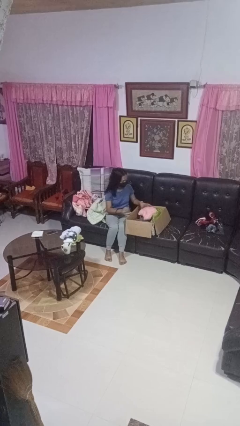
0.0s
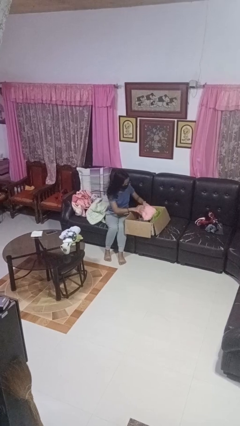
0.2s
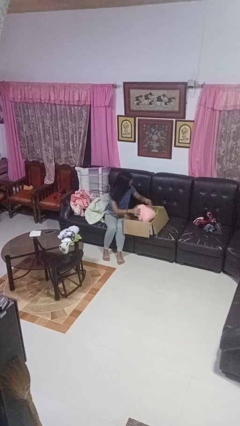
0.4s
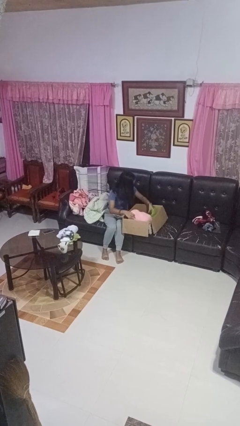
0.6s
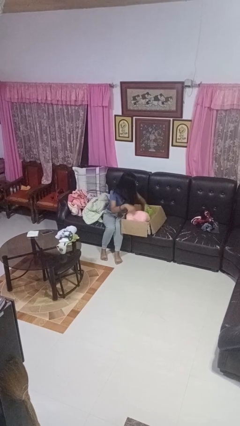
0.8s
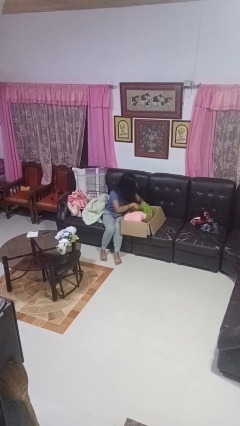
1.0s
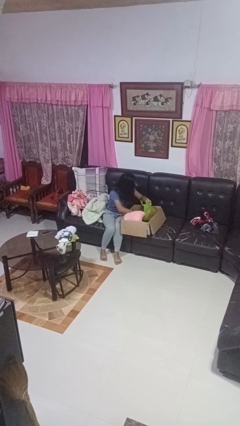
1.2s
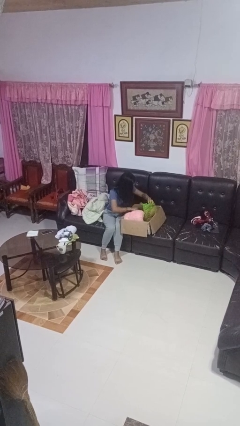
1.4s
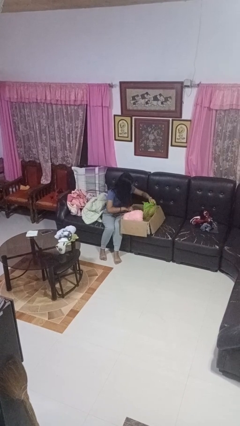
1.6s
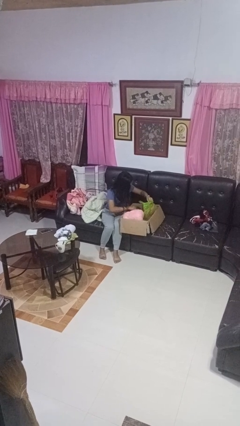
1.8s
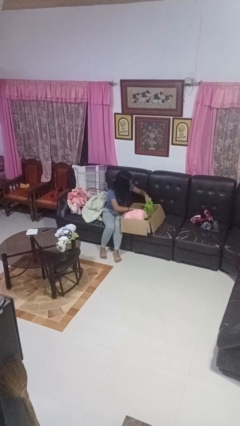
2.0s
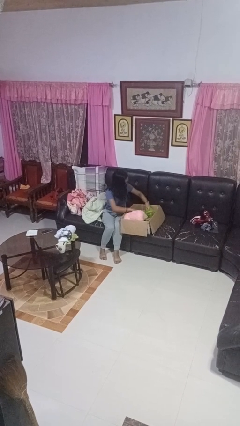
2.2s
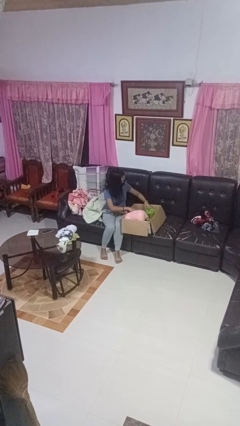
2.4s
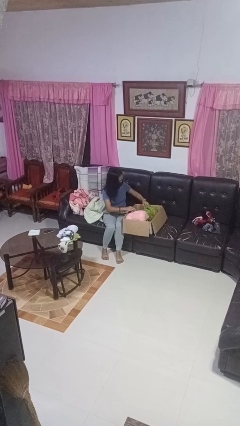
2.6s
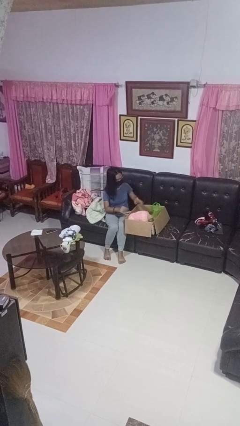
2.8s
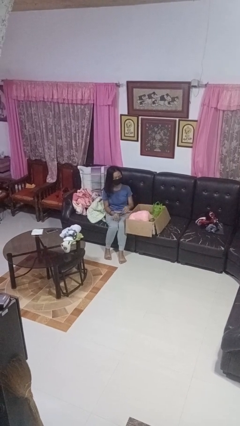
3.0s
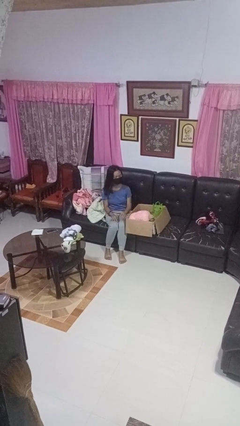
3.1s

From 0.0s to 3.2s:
person searches in box

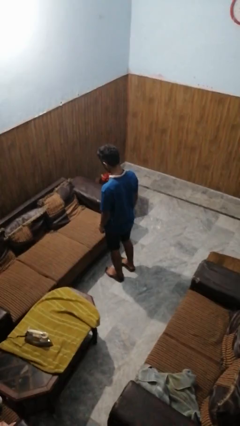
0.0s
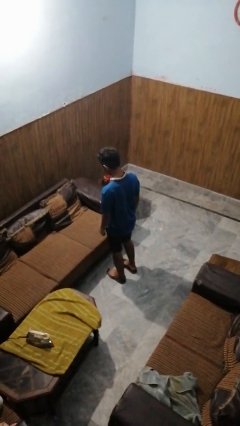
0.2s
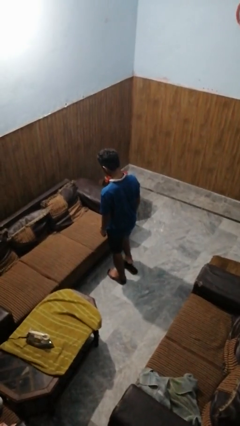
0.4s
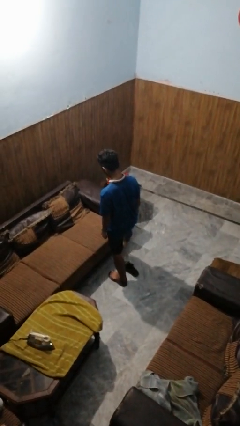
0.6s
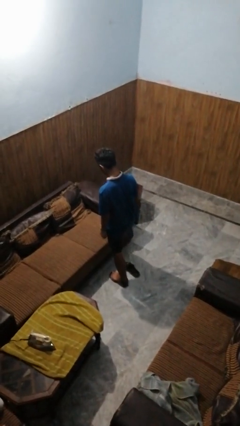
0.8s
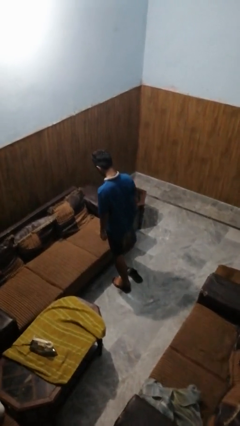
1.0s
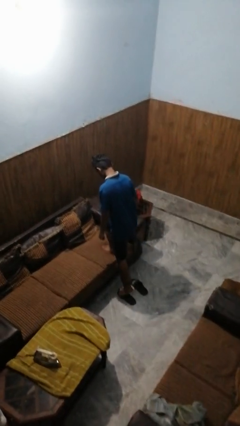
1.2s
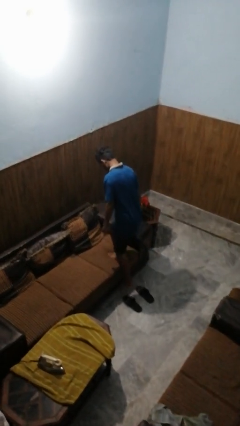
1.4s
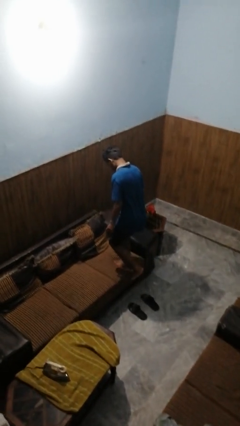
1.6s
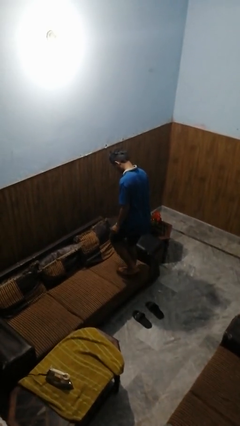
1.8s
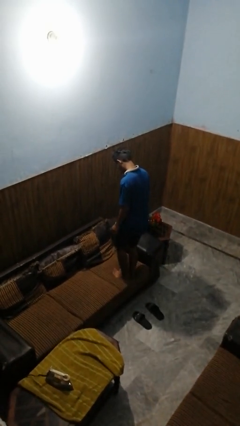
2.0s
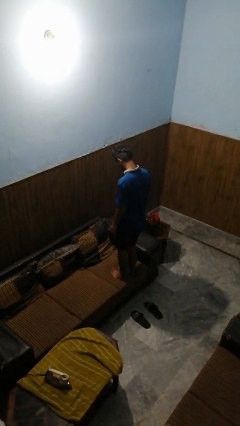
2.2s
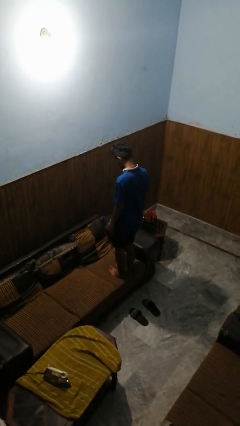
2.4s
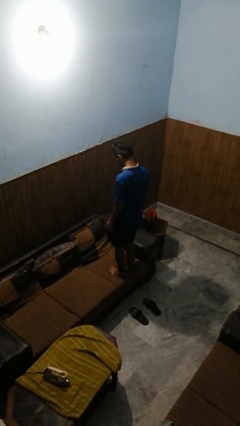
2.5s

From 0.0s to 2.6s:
person climbs on couch

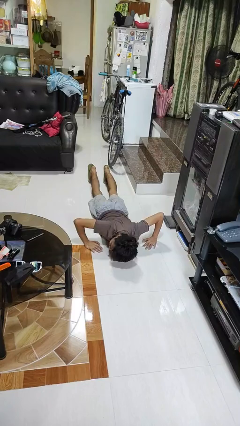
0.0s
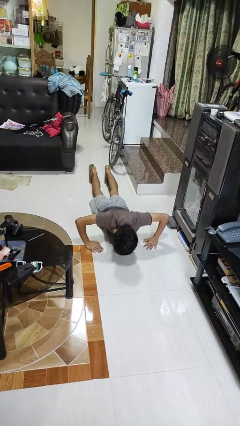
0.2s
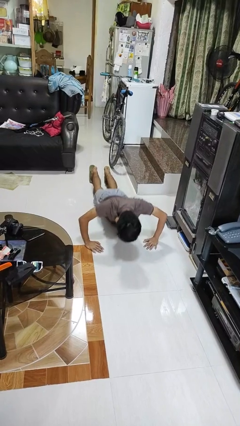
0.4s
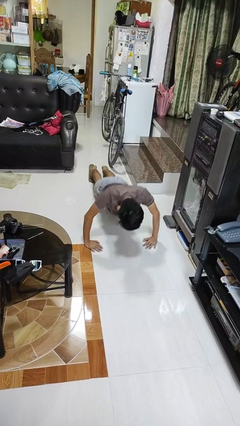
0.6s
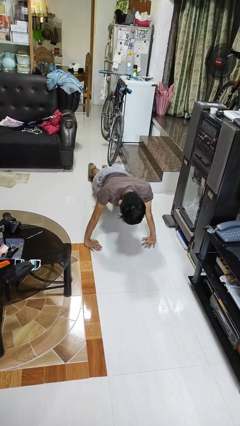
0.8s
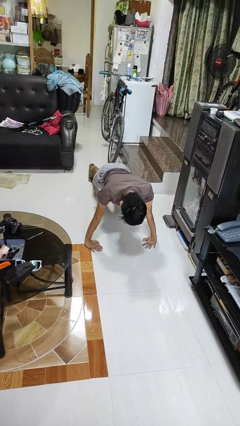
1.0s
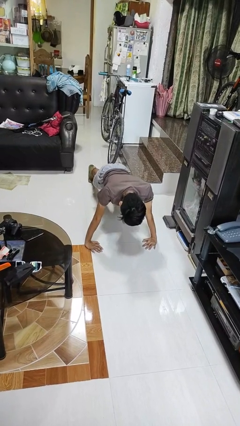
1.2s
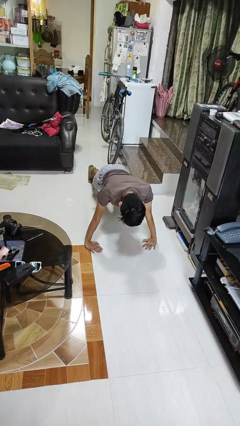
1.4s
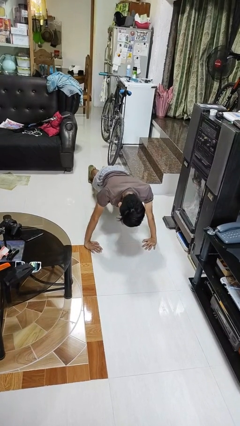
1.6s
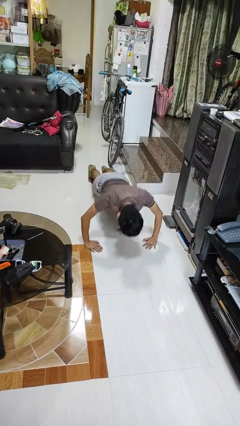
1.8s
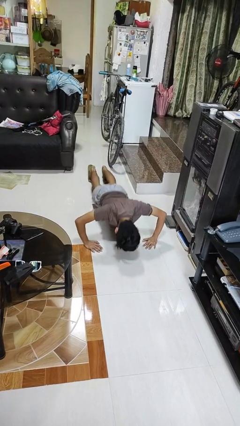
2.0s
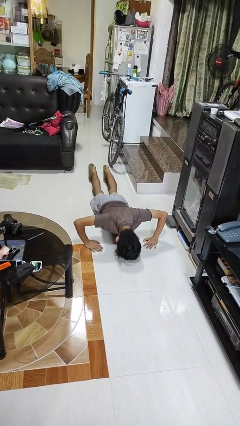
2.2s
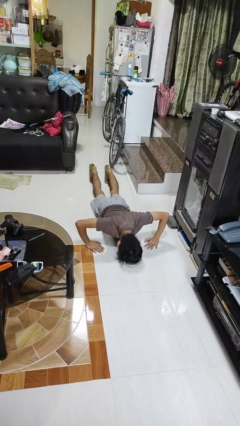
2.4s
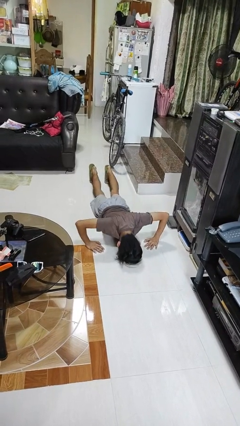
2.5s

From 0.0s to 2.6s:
person exercises with pushup

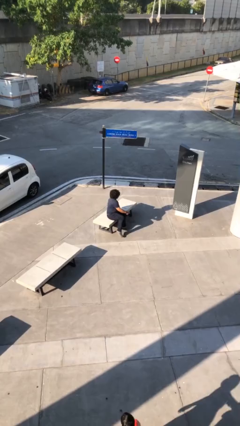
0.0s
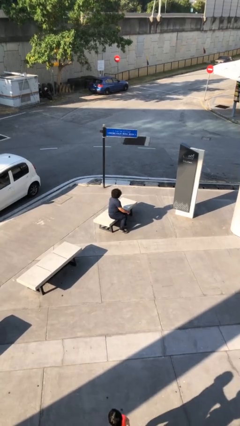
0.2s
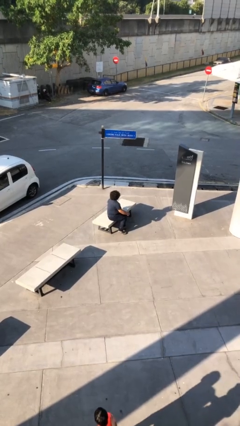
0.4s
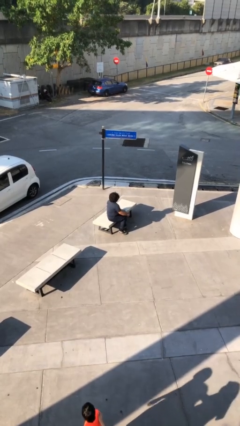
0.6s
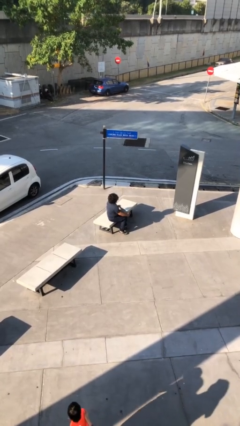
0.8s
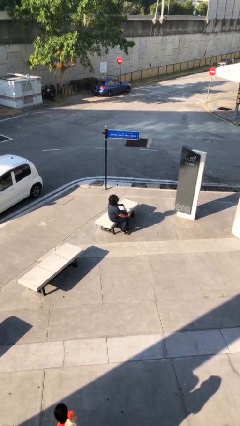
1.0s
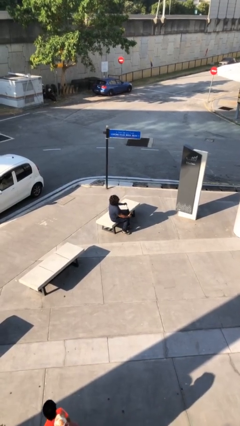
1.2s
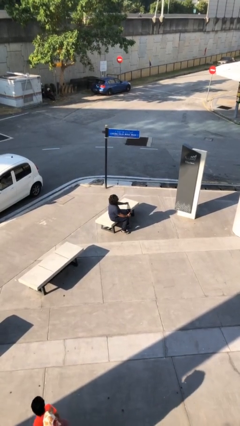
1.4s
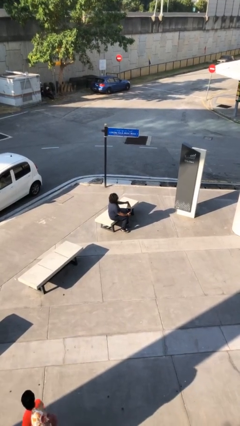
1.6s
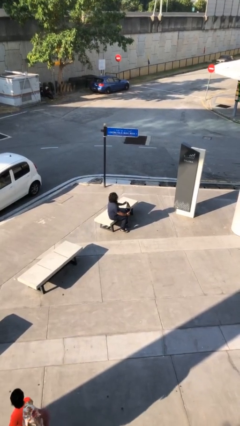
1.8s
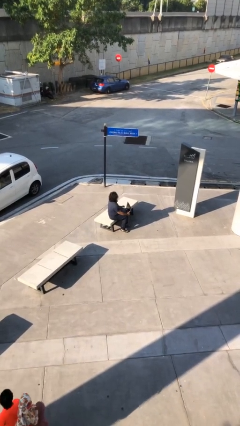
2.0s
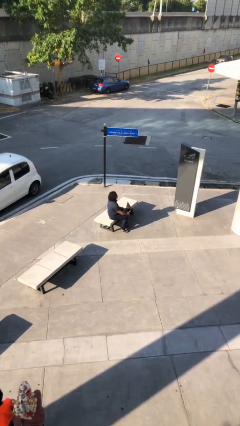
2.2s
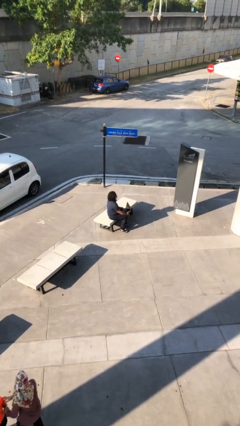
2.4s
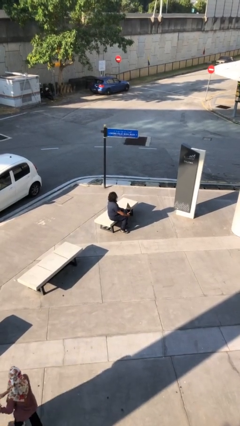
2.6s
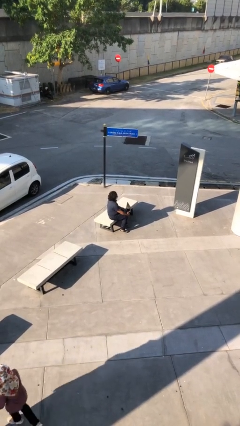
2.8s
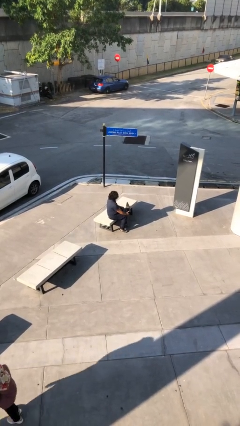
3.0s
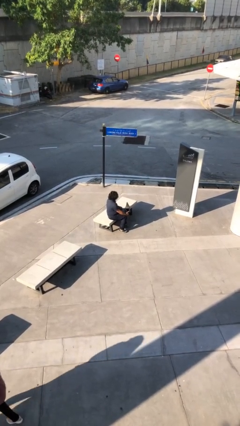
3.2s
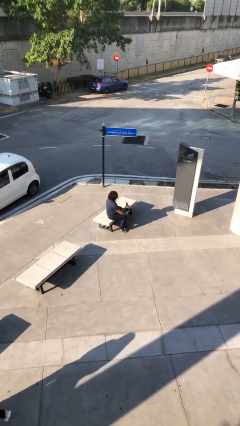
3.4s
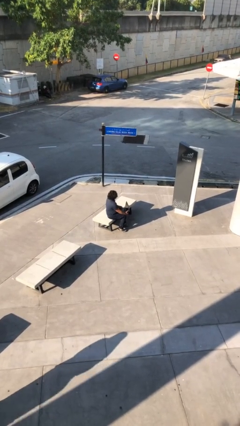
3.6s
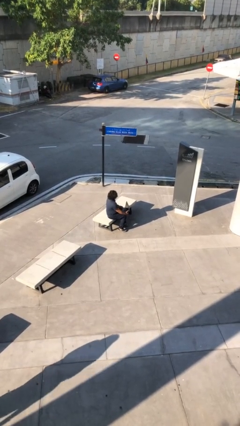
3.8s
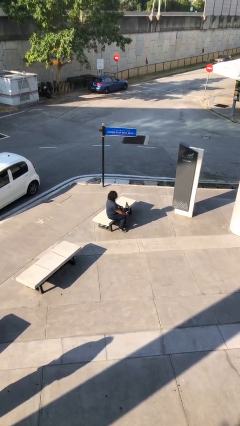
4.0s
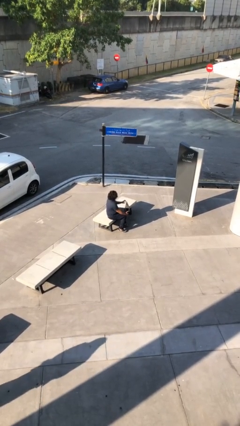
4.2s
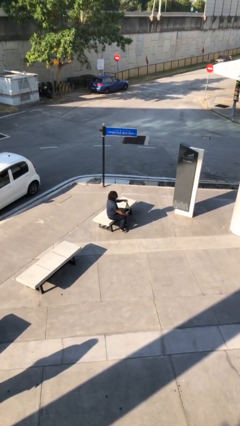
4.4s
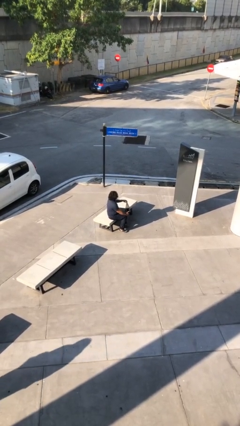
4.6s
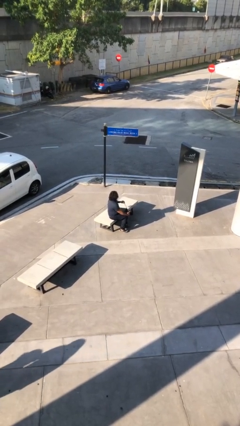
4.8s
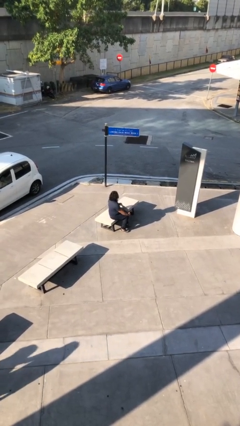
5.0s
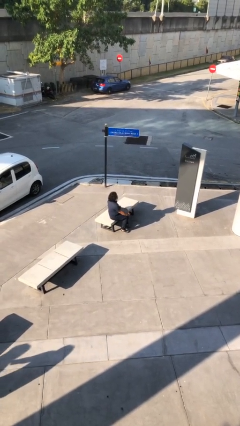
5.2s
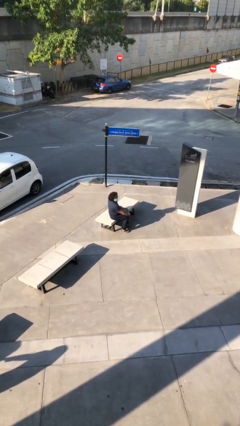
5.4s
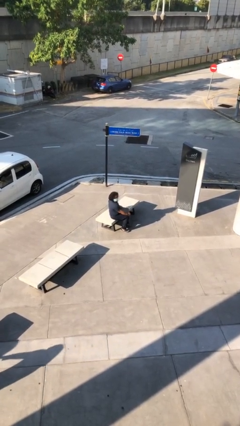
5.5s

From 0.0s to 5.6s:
person interacts with laptop

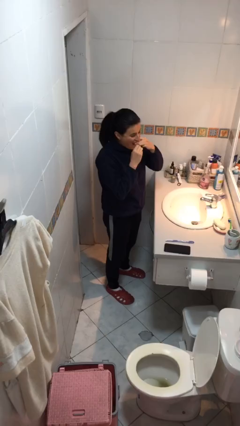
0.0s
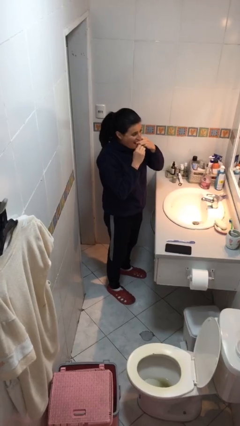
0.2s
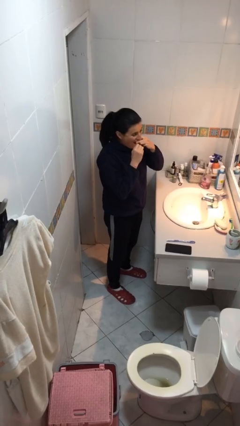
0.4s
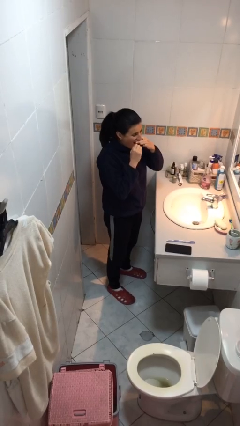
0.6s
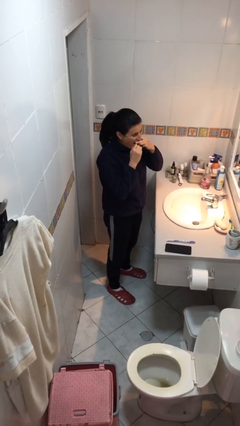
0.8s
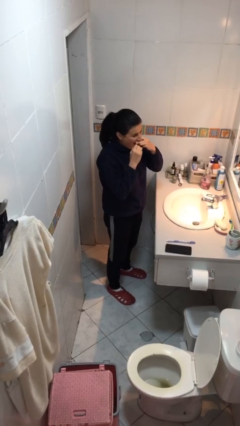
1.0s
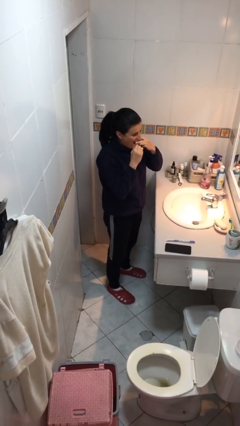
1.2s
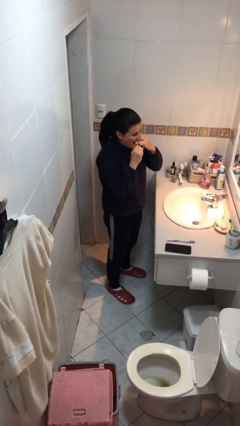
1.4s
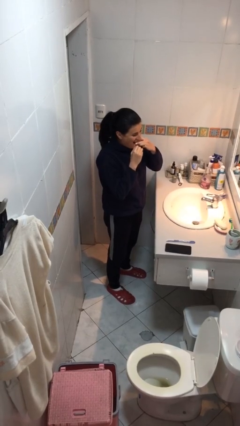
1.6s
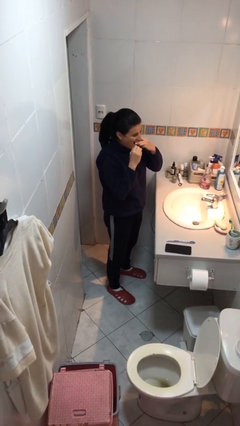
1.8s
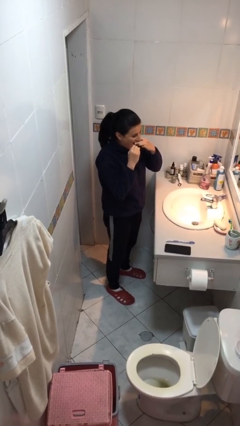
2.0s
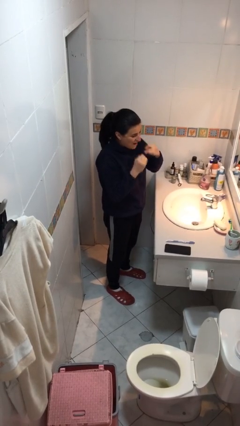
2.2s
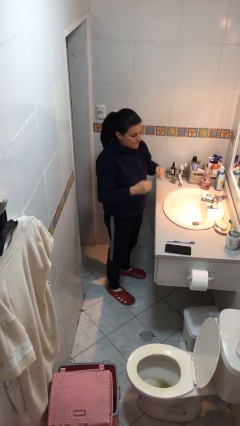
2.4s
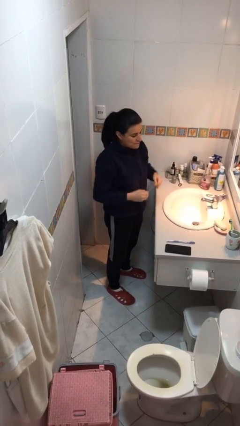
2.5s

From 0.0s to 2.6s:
person flosses

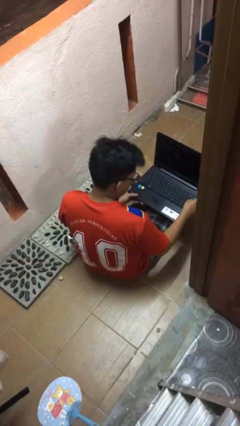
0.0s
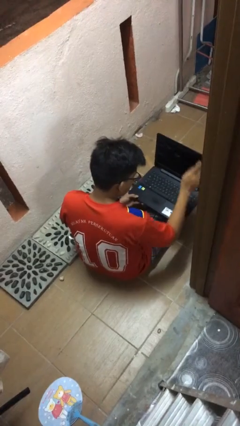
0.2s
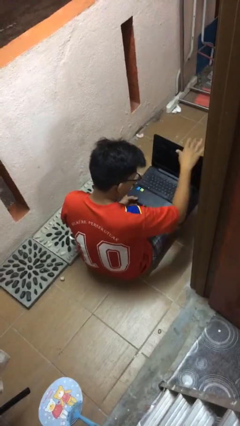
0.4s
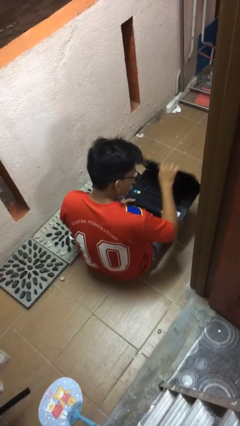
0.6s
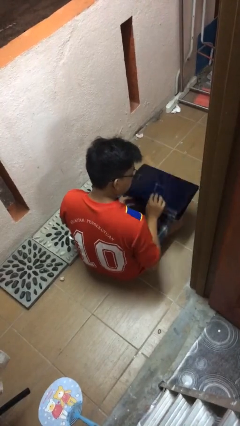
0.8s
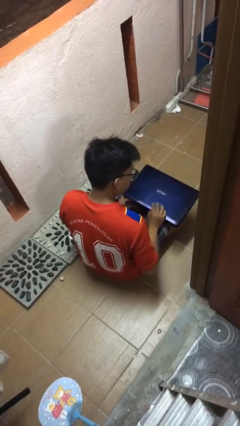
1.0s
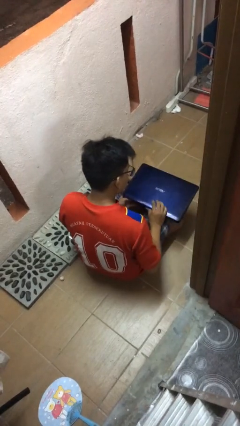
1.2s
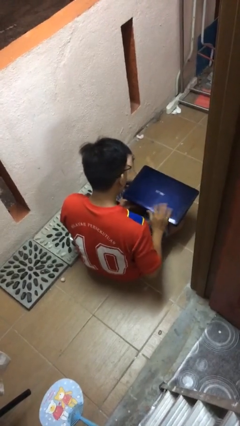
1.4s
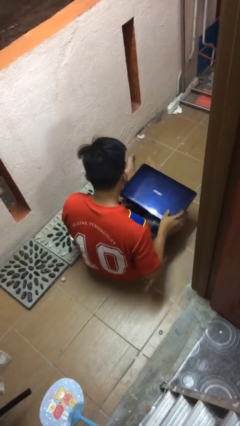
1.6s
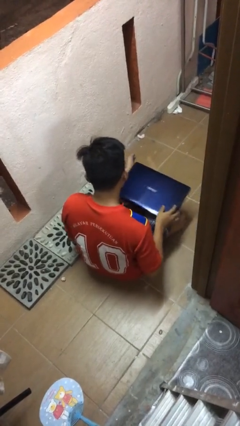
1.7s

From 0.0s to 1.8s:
person closes laptop
